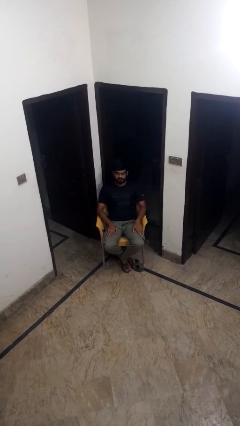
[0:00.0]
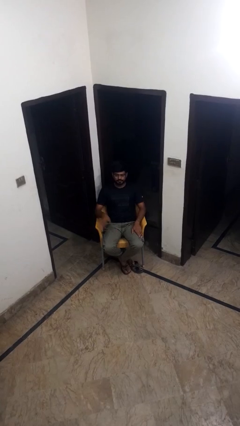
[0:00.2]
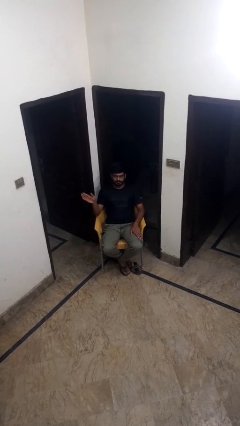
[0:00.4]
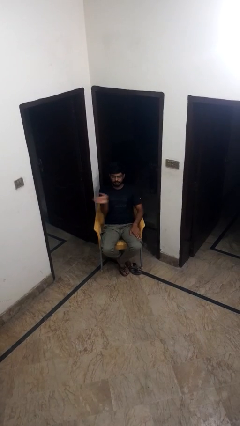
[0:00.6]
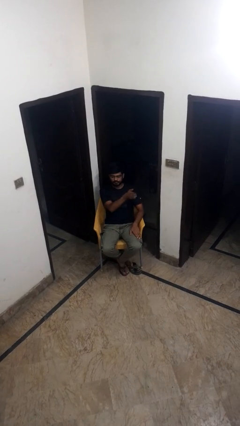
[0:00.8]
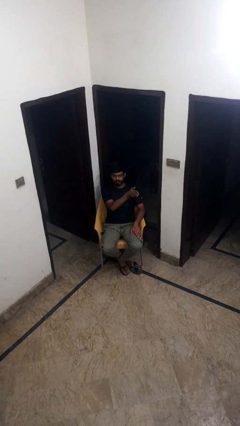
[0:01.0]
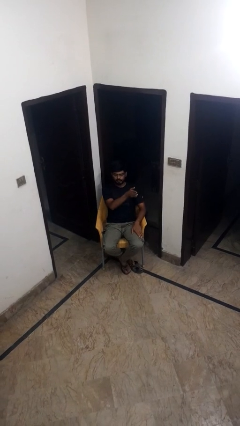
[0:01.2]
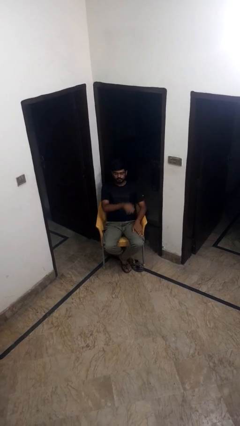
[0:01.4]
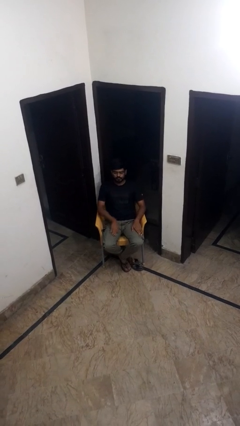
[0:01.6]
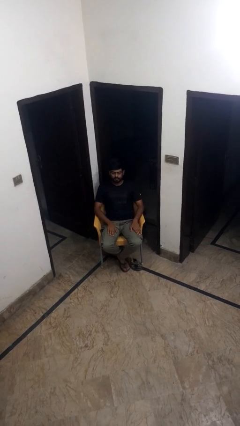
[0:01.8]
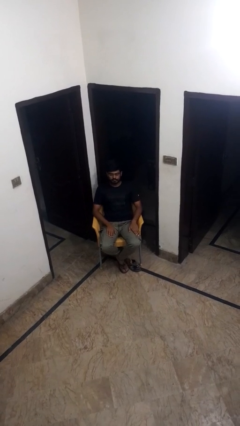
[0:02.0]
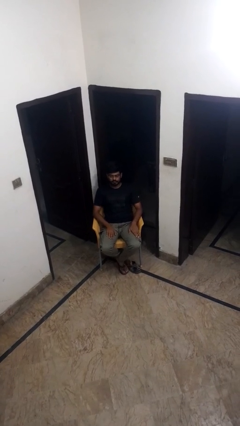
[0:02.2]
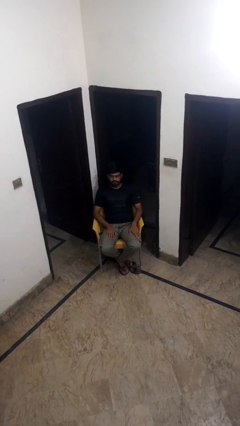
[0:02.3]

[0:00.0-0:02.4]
person gestures swipe left

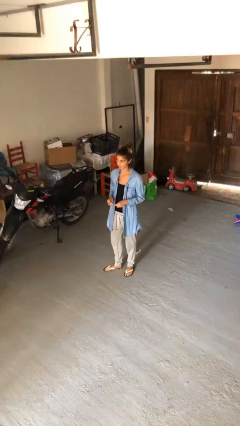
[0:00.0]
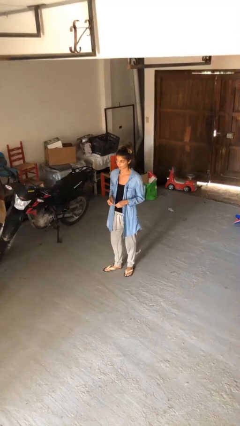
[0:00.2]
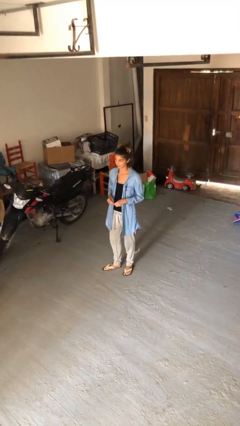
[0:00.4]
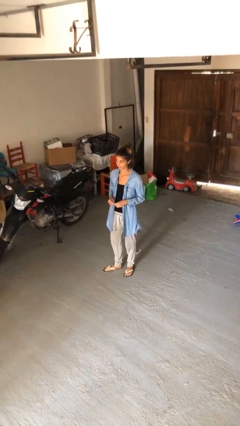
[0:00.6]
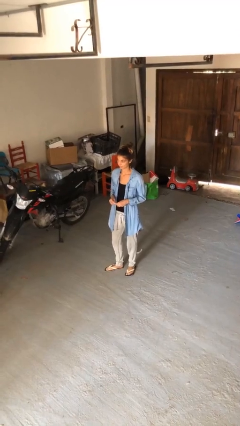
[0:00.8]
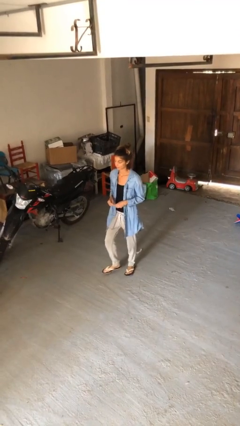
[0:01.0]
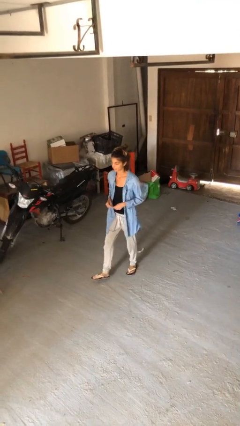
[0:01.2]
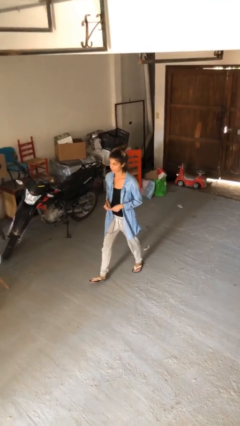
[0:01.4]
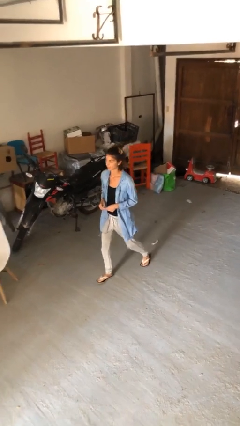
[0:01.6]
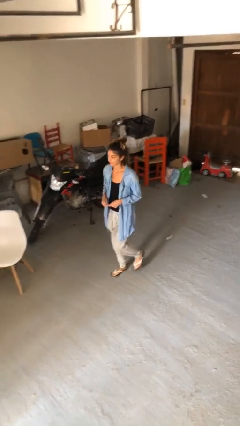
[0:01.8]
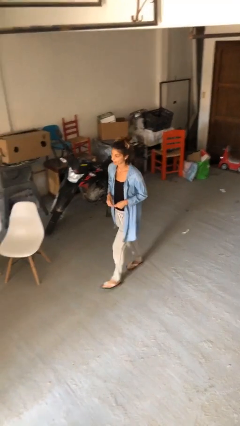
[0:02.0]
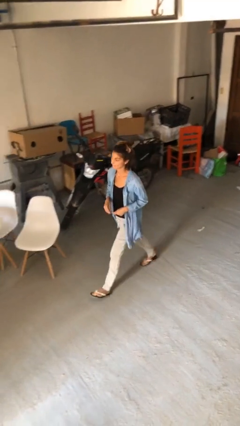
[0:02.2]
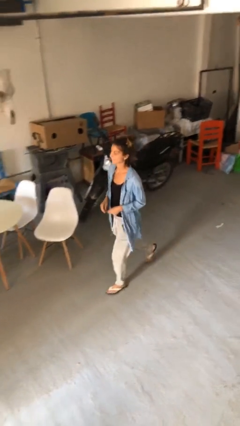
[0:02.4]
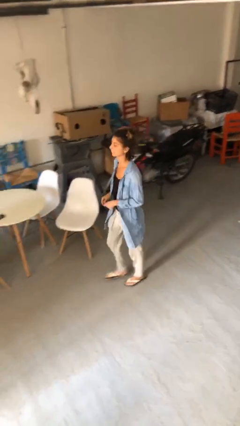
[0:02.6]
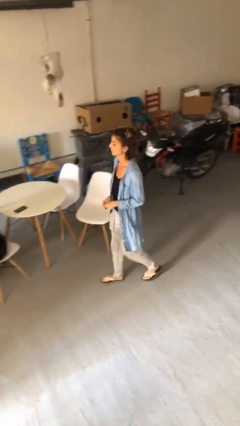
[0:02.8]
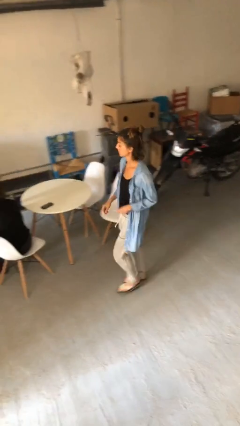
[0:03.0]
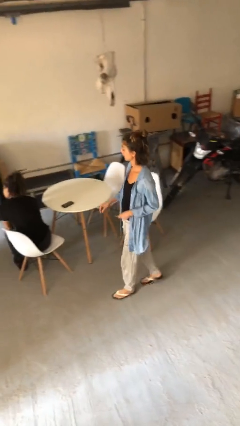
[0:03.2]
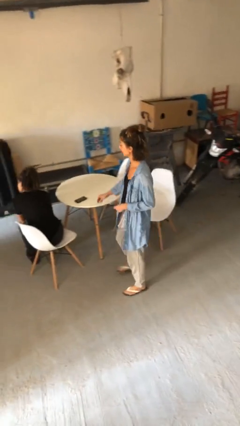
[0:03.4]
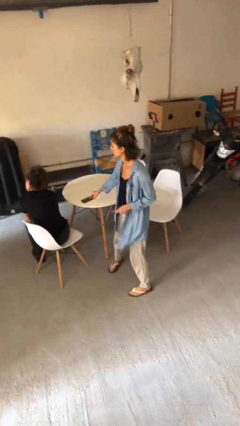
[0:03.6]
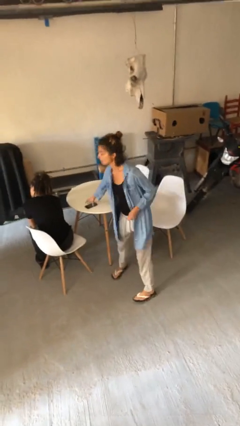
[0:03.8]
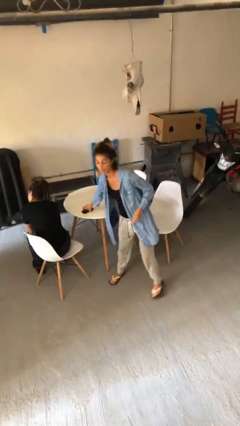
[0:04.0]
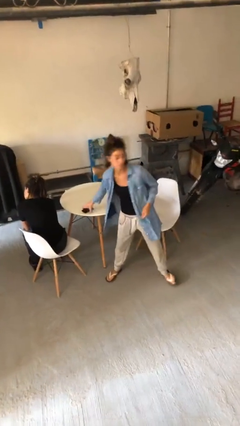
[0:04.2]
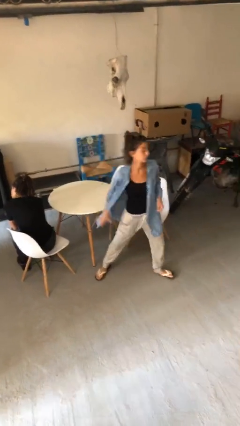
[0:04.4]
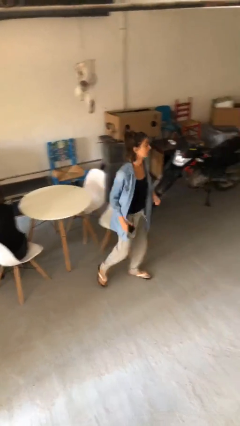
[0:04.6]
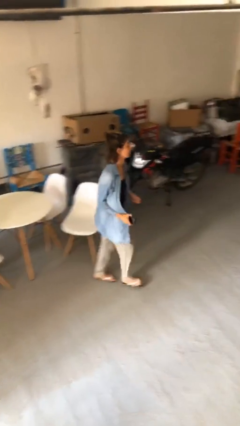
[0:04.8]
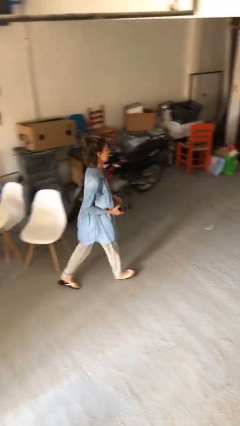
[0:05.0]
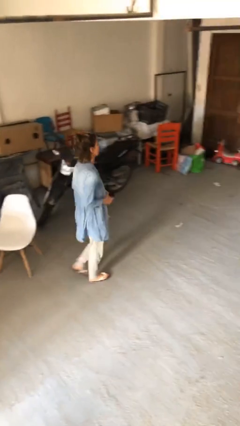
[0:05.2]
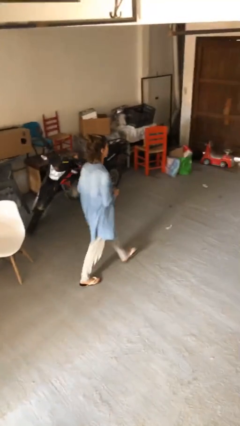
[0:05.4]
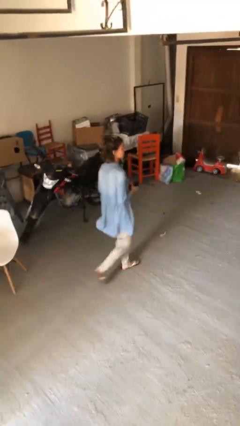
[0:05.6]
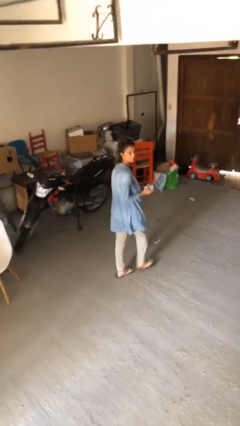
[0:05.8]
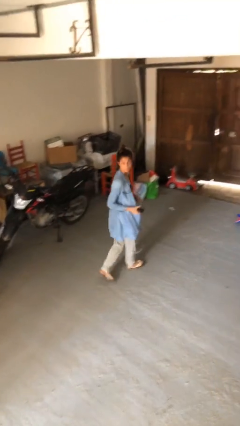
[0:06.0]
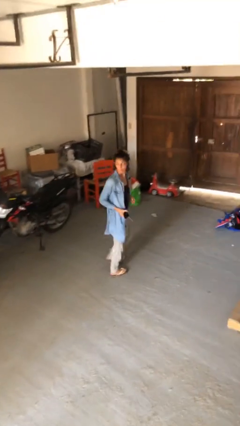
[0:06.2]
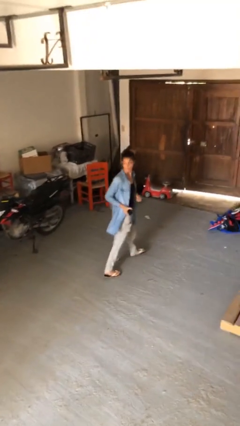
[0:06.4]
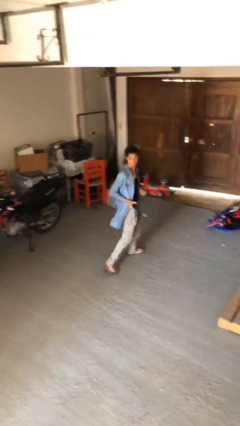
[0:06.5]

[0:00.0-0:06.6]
person steals object from person

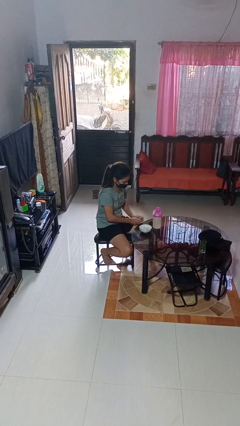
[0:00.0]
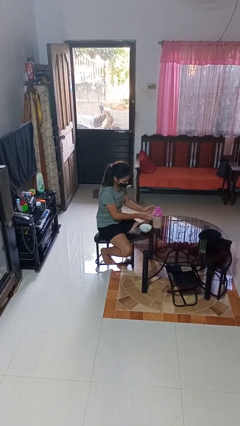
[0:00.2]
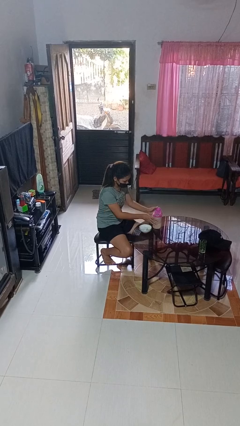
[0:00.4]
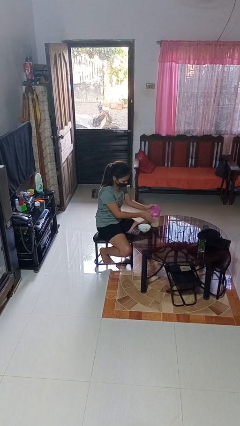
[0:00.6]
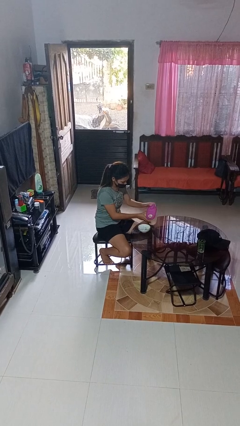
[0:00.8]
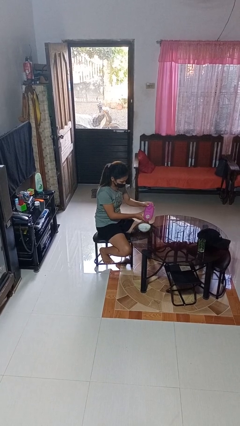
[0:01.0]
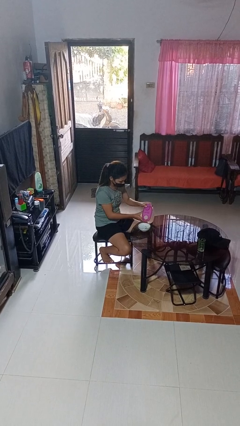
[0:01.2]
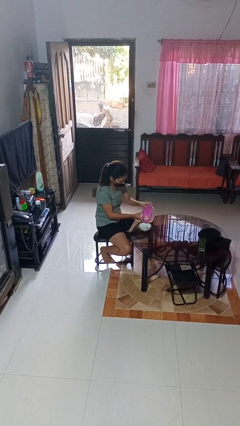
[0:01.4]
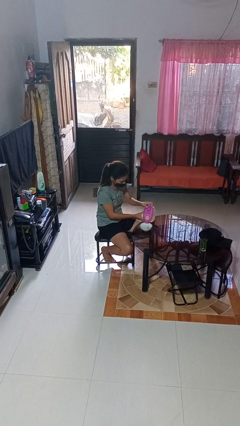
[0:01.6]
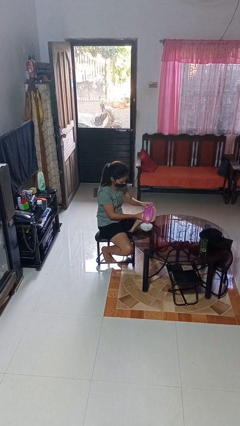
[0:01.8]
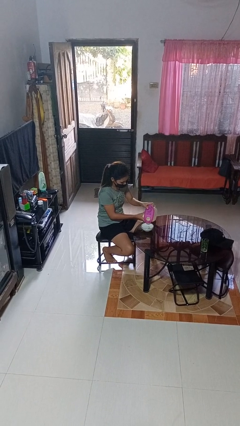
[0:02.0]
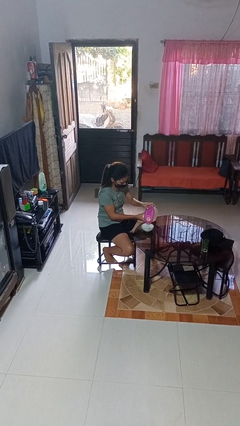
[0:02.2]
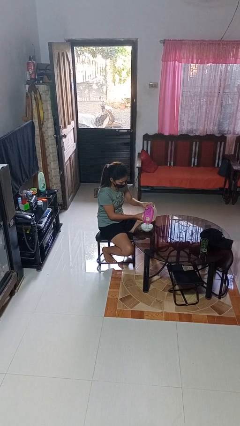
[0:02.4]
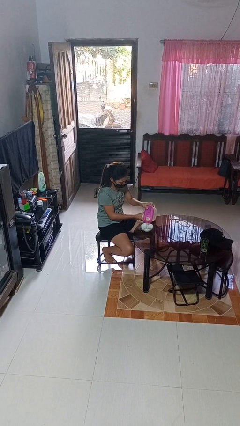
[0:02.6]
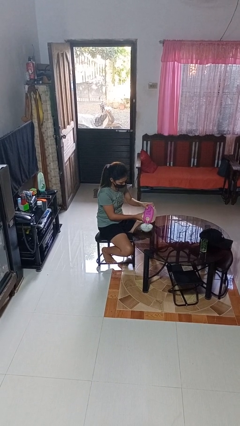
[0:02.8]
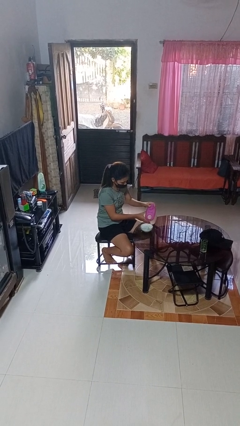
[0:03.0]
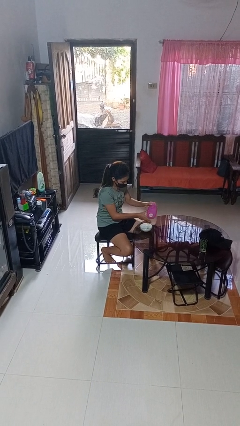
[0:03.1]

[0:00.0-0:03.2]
person pours into bowl

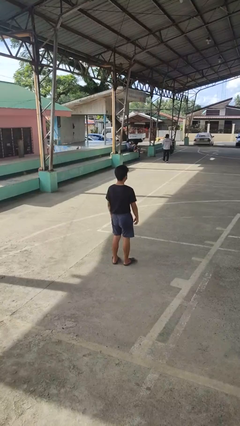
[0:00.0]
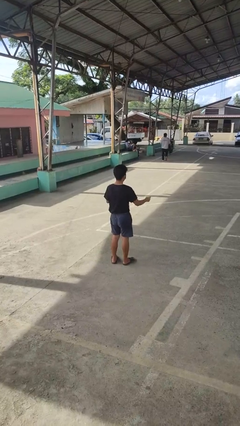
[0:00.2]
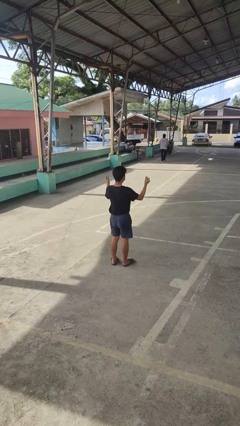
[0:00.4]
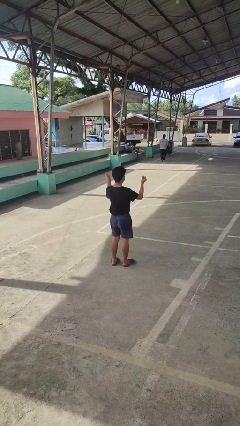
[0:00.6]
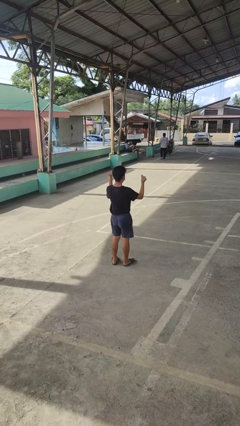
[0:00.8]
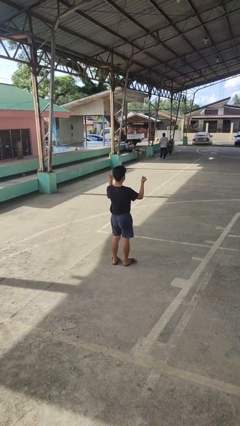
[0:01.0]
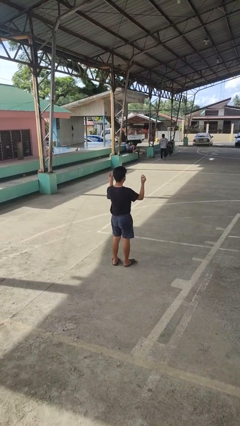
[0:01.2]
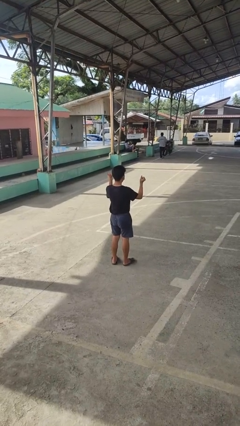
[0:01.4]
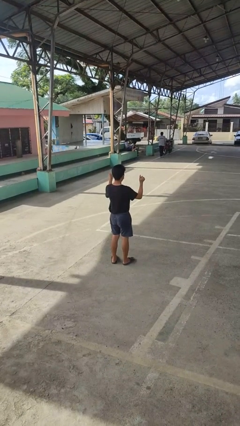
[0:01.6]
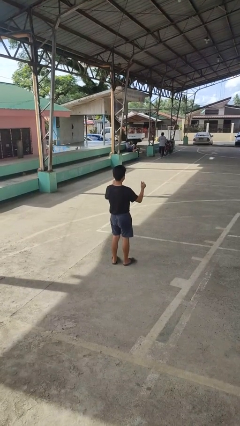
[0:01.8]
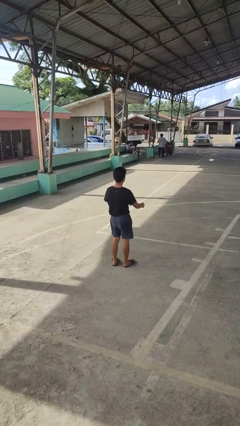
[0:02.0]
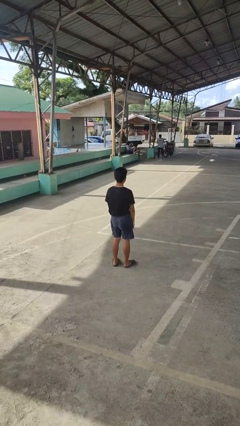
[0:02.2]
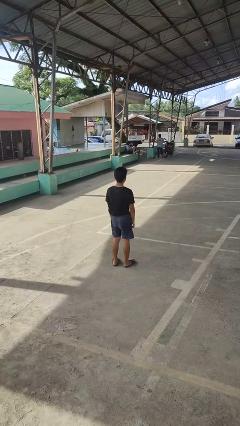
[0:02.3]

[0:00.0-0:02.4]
person snaps fingers

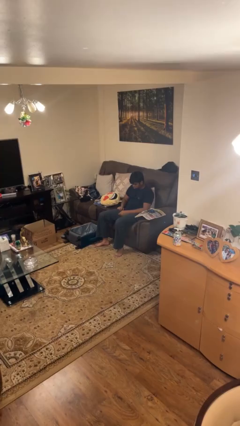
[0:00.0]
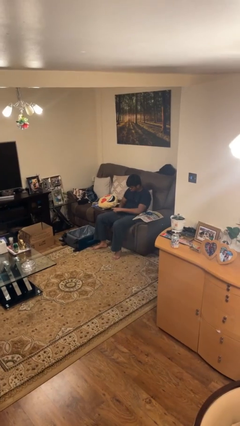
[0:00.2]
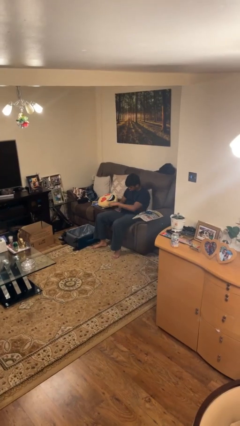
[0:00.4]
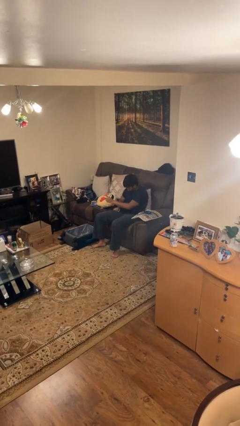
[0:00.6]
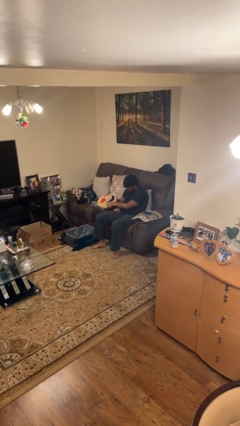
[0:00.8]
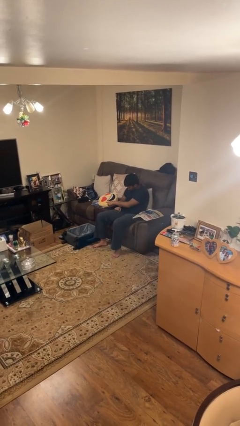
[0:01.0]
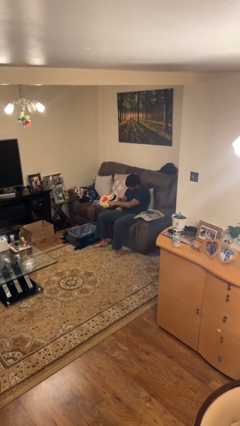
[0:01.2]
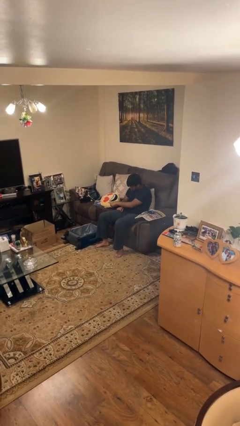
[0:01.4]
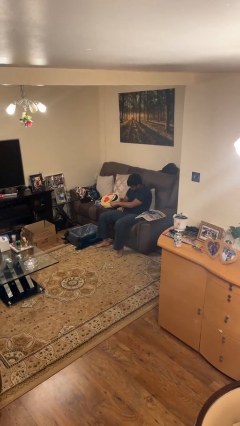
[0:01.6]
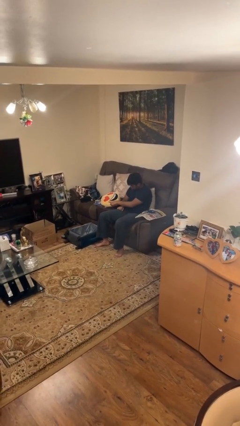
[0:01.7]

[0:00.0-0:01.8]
person taps object with finger

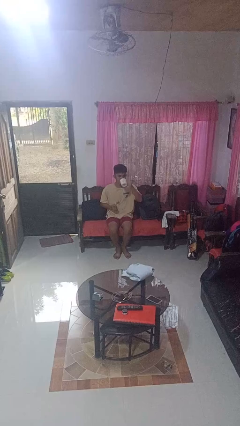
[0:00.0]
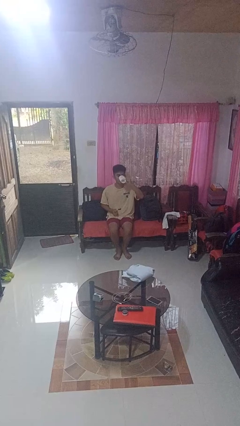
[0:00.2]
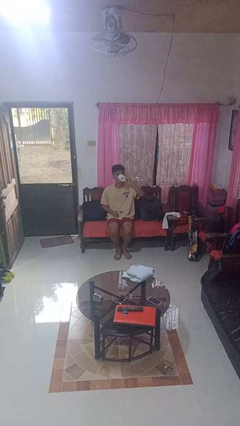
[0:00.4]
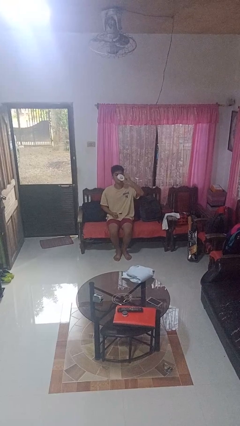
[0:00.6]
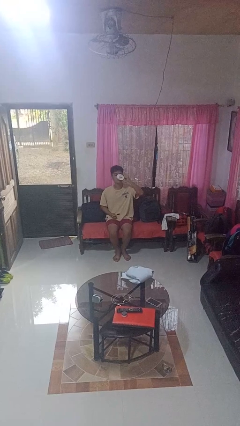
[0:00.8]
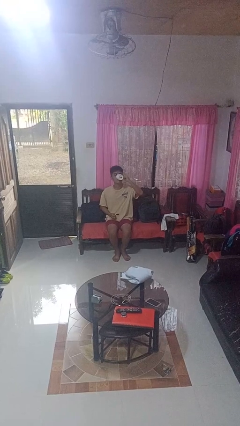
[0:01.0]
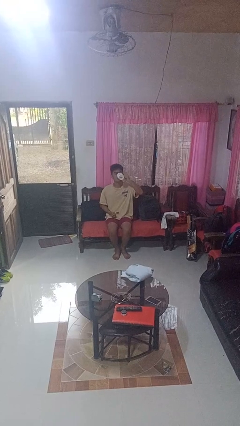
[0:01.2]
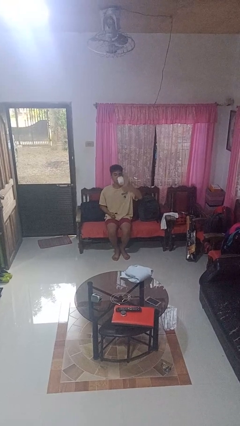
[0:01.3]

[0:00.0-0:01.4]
person drinks from mug
